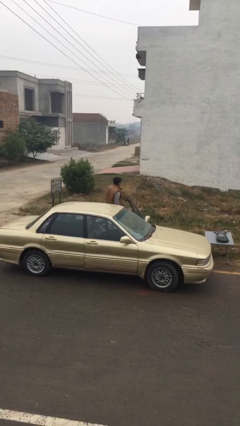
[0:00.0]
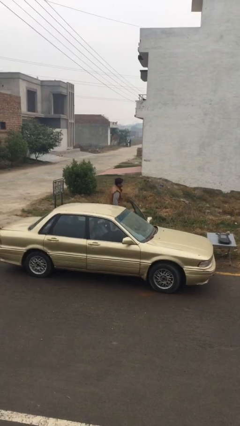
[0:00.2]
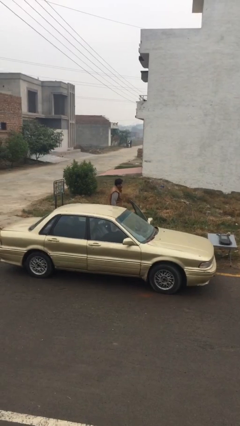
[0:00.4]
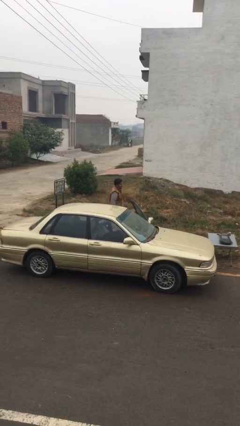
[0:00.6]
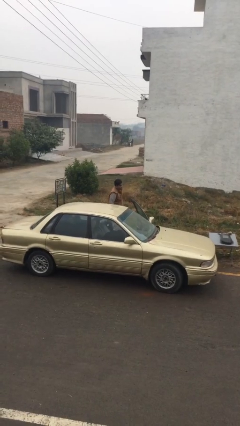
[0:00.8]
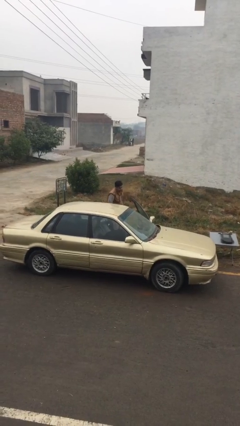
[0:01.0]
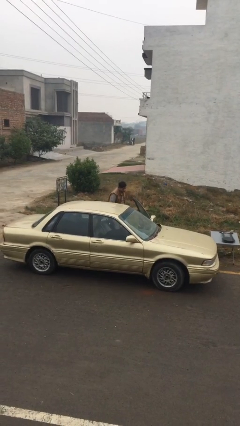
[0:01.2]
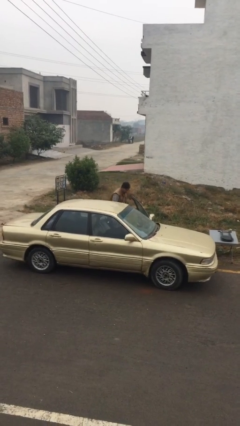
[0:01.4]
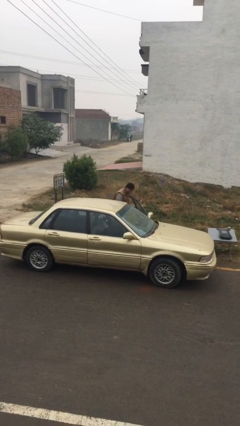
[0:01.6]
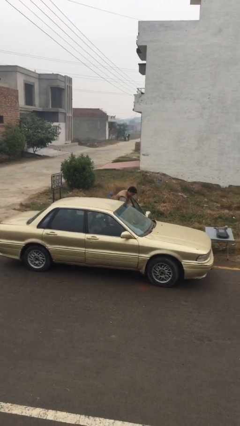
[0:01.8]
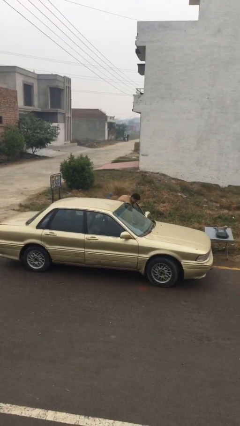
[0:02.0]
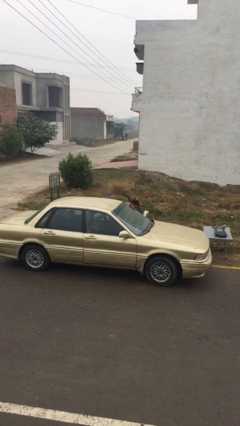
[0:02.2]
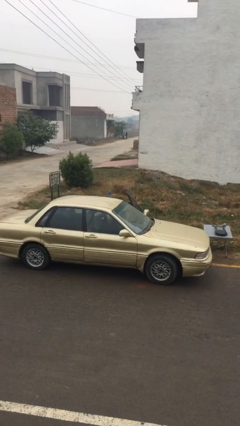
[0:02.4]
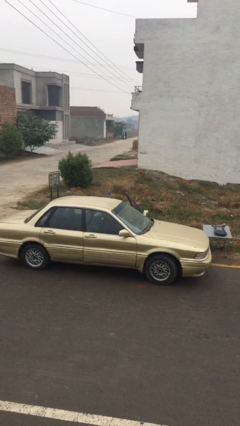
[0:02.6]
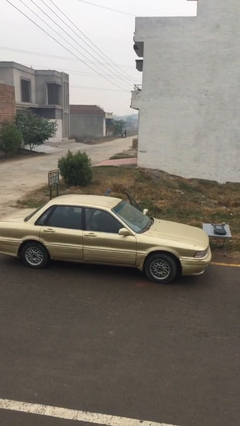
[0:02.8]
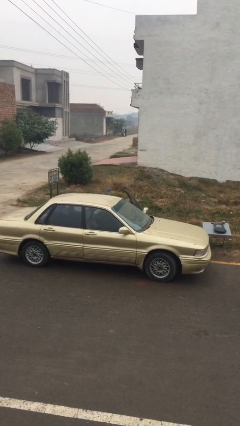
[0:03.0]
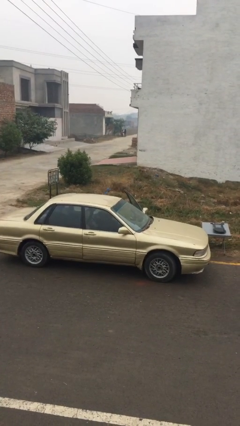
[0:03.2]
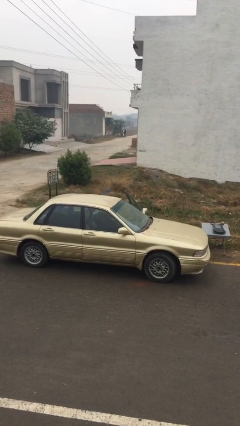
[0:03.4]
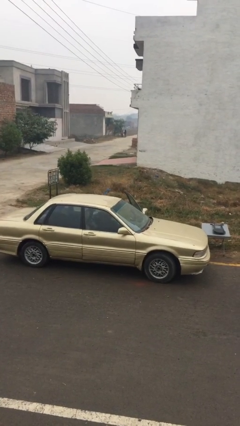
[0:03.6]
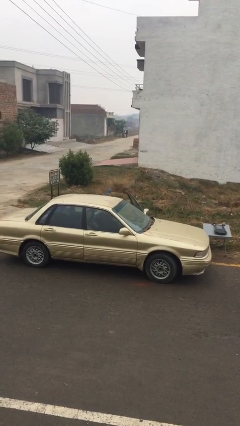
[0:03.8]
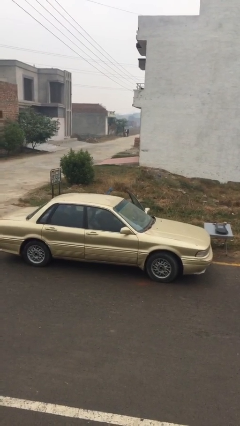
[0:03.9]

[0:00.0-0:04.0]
person enters car

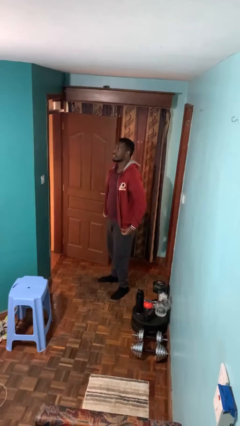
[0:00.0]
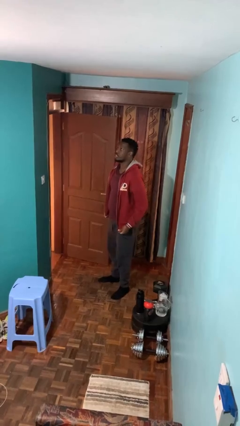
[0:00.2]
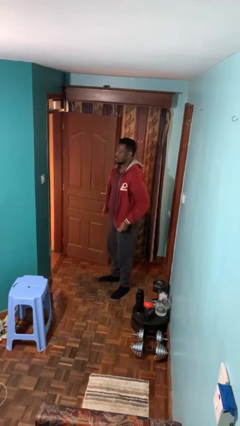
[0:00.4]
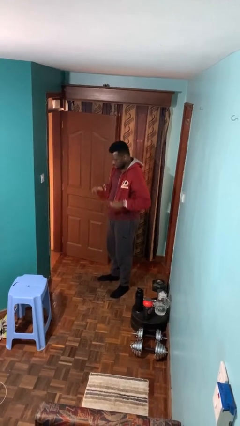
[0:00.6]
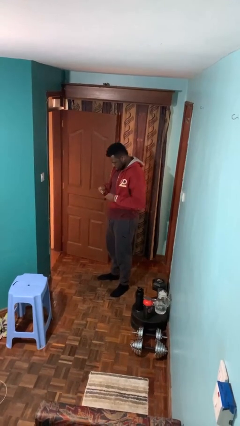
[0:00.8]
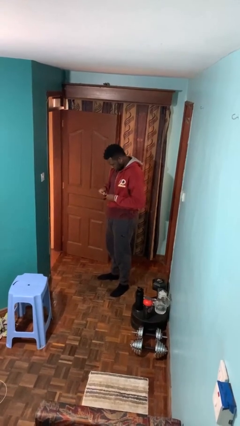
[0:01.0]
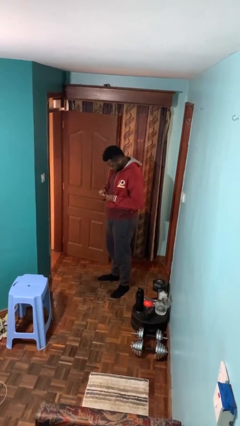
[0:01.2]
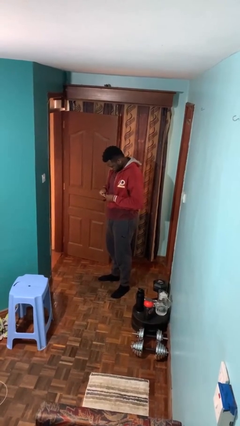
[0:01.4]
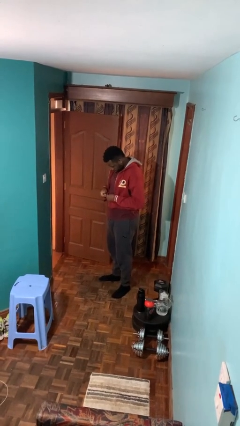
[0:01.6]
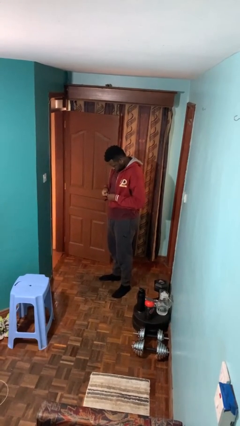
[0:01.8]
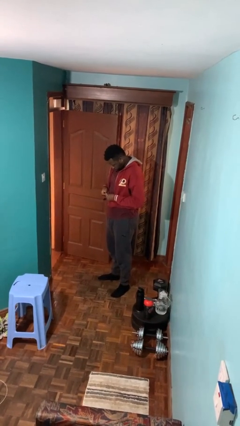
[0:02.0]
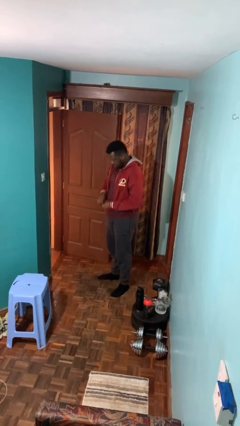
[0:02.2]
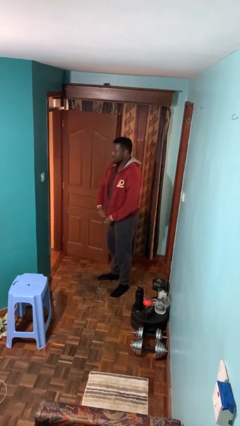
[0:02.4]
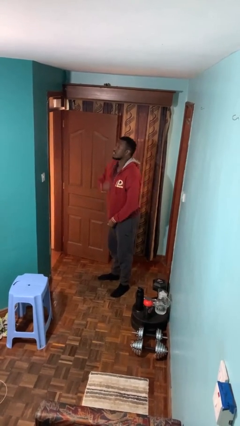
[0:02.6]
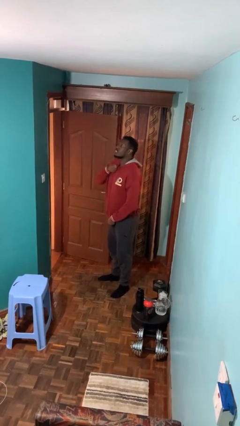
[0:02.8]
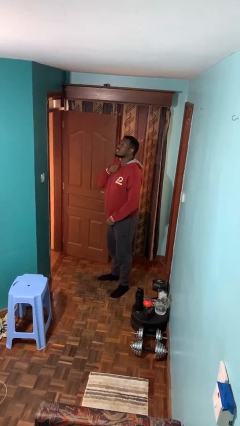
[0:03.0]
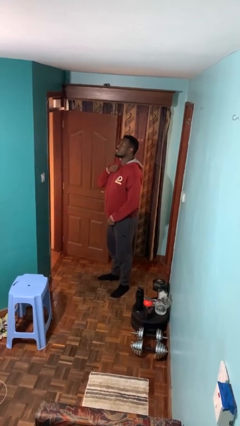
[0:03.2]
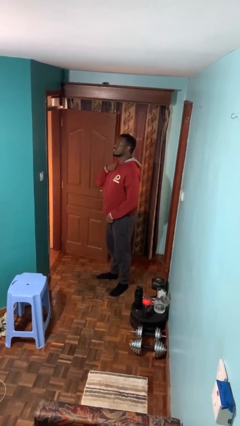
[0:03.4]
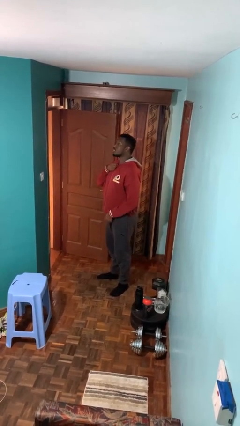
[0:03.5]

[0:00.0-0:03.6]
person zips up jacket

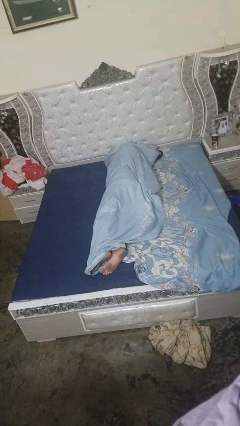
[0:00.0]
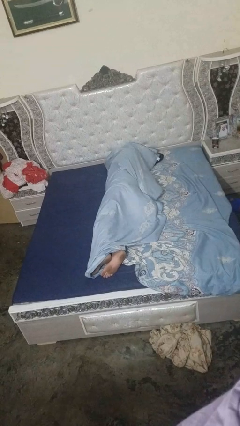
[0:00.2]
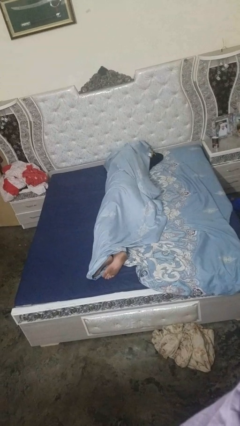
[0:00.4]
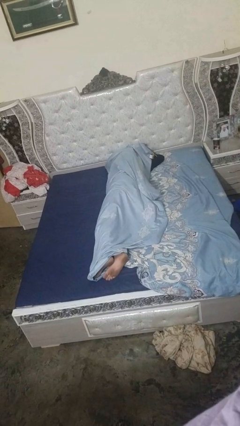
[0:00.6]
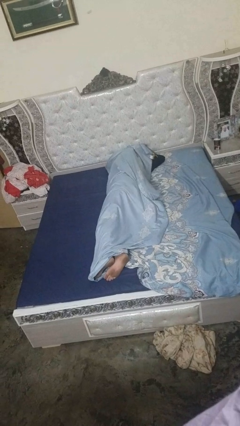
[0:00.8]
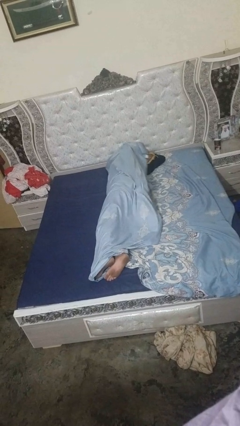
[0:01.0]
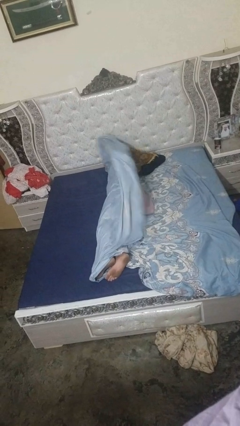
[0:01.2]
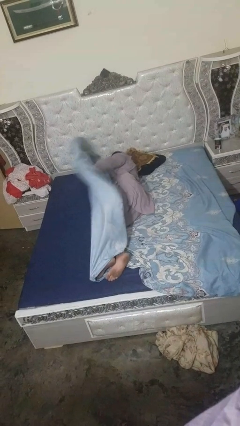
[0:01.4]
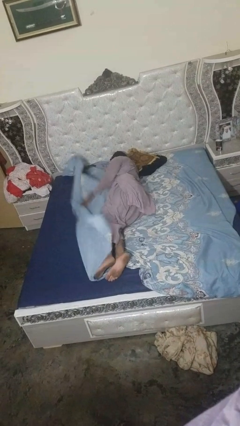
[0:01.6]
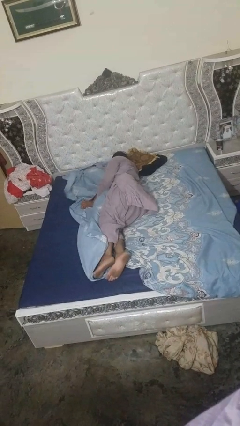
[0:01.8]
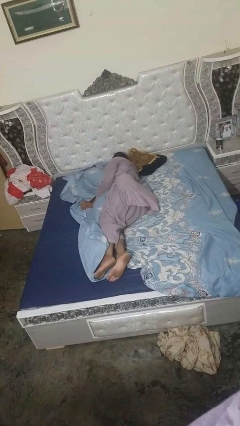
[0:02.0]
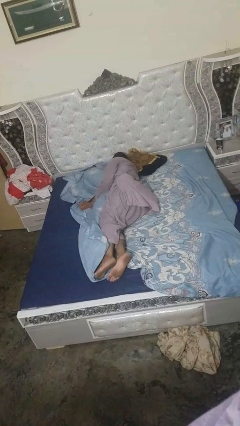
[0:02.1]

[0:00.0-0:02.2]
person uncovers with bedsheets

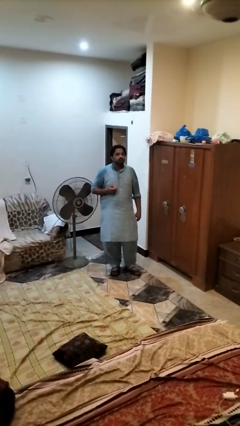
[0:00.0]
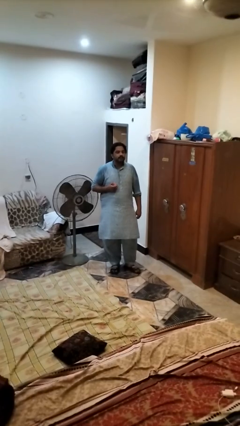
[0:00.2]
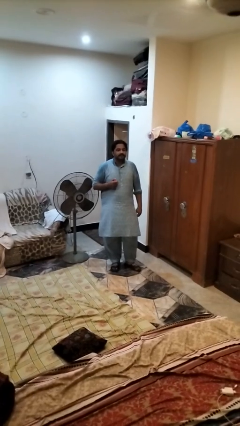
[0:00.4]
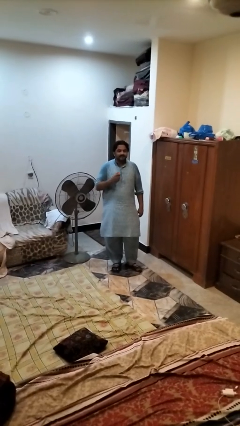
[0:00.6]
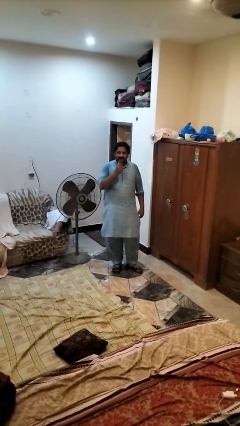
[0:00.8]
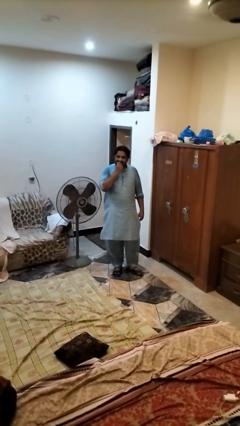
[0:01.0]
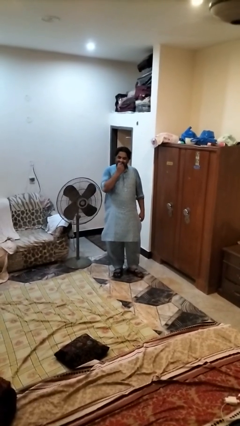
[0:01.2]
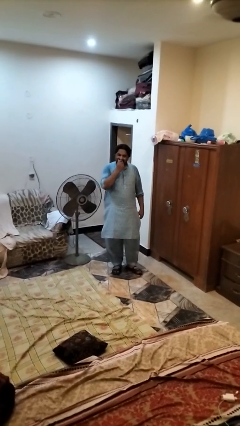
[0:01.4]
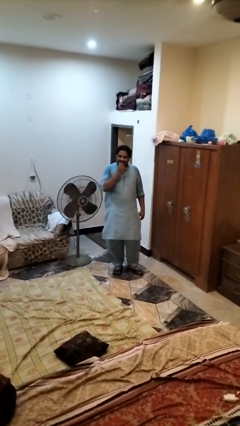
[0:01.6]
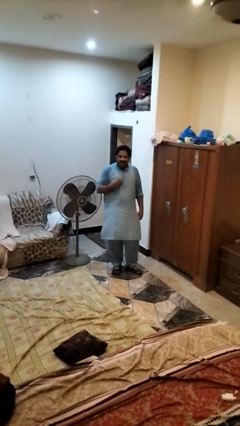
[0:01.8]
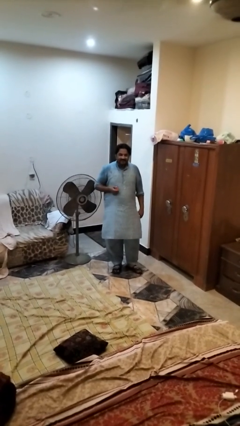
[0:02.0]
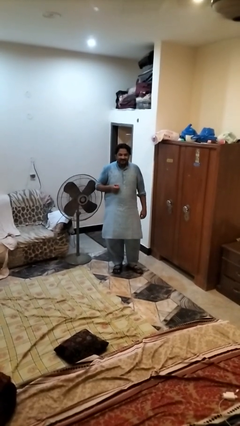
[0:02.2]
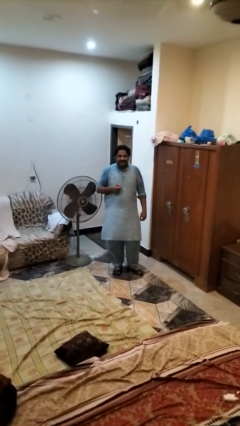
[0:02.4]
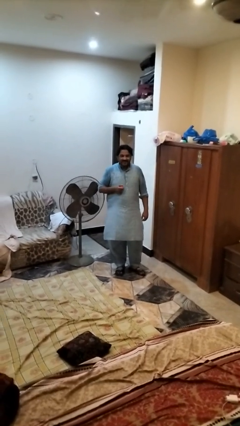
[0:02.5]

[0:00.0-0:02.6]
person eats apple

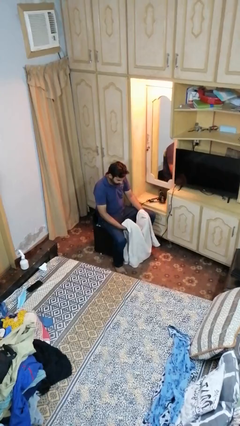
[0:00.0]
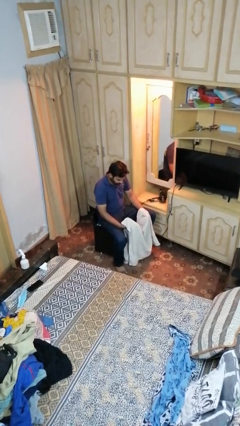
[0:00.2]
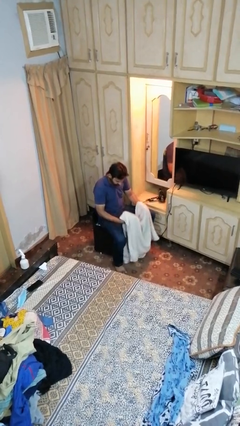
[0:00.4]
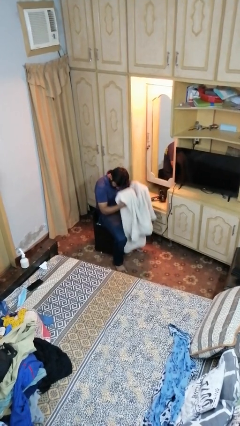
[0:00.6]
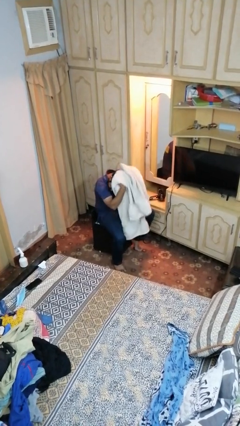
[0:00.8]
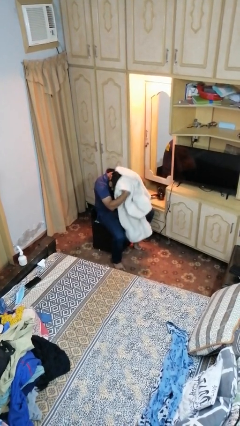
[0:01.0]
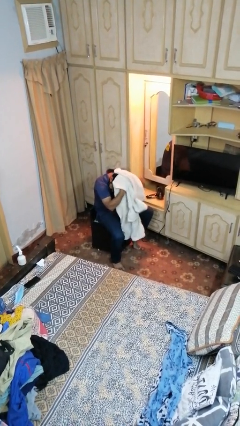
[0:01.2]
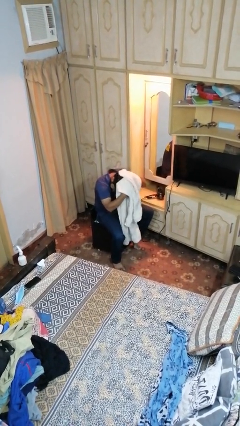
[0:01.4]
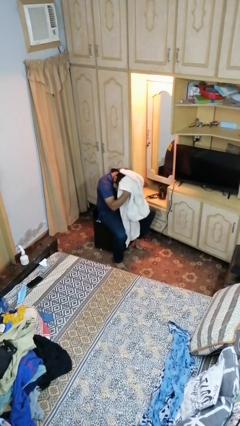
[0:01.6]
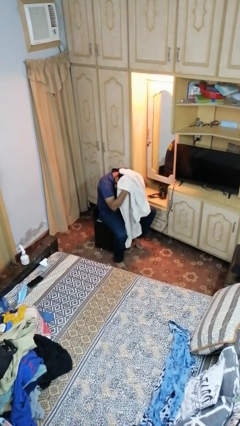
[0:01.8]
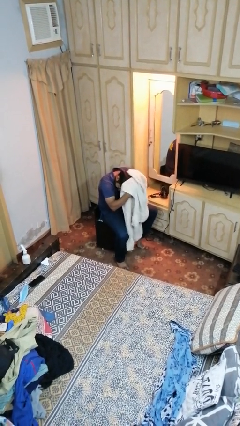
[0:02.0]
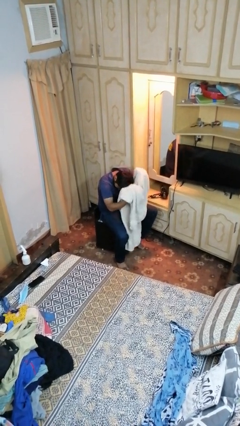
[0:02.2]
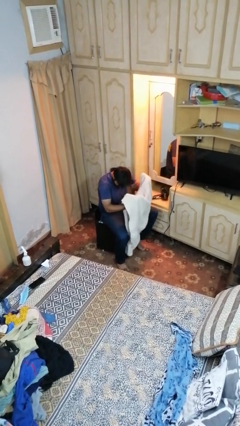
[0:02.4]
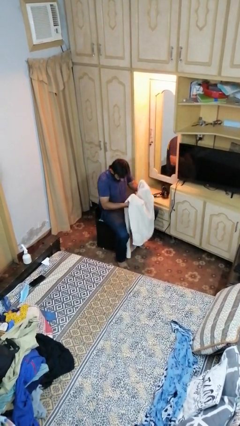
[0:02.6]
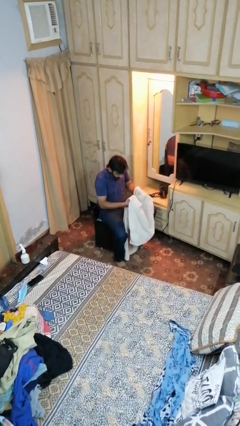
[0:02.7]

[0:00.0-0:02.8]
person dries hair with towel

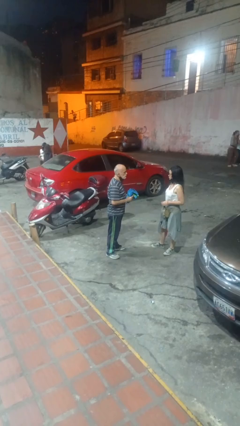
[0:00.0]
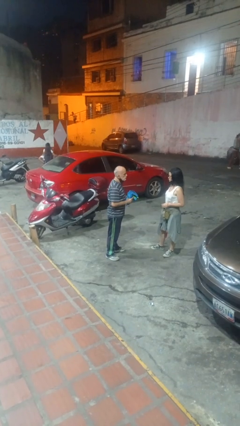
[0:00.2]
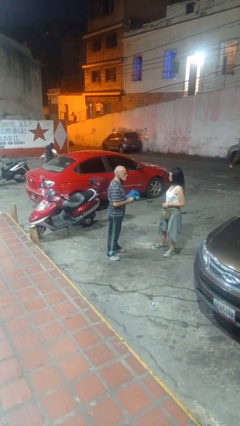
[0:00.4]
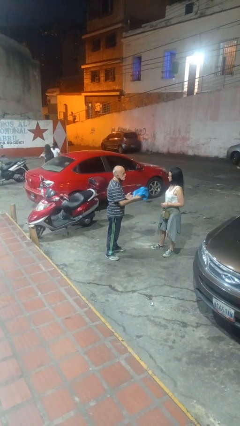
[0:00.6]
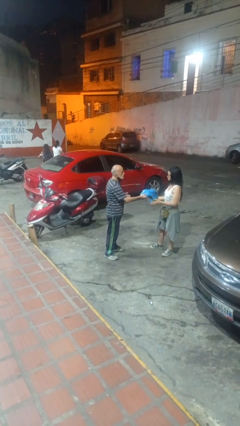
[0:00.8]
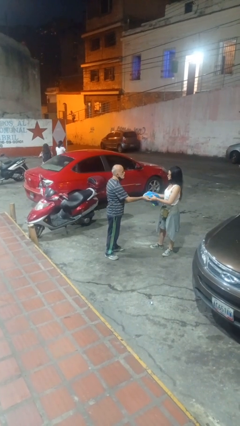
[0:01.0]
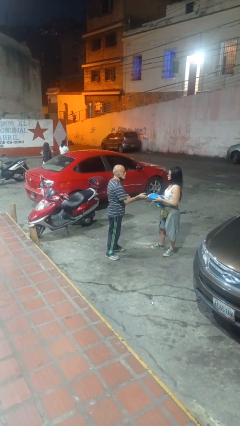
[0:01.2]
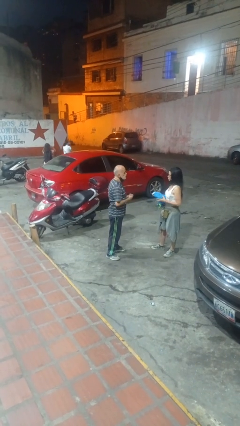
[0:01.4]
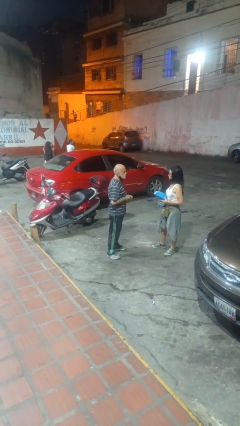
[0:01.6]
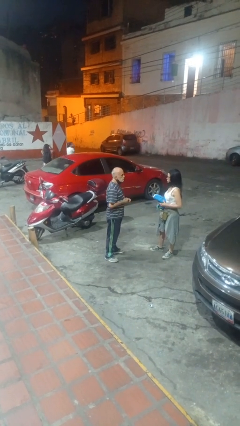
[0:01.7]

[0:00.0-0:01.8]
person transfers object to person
